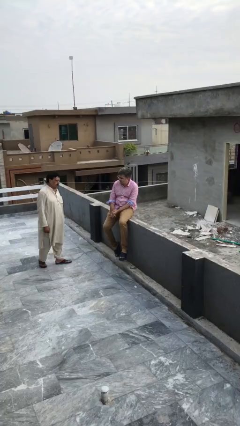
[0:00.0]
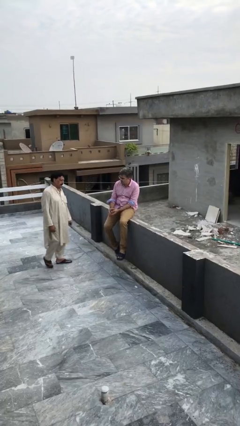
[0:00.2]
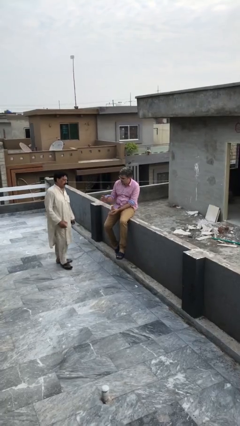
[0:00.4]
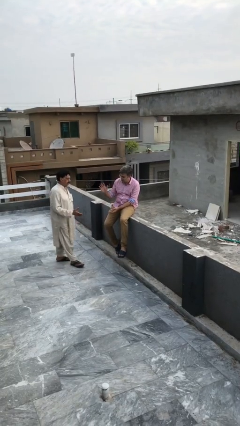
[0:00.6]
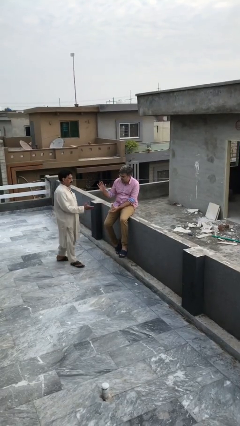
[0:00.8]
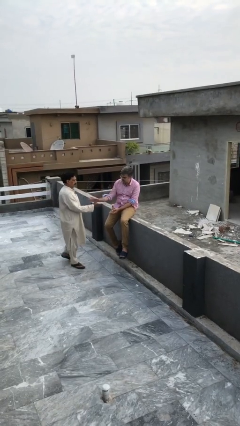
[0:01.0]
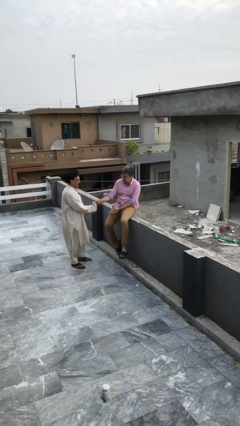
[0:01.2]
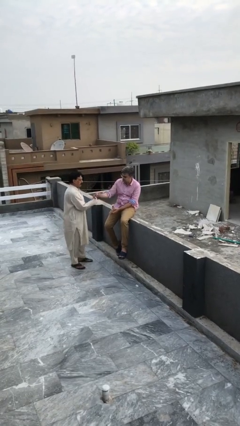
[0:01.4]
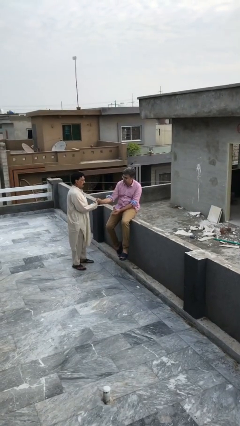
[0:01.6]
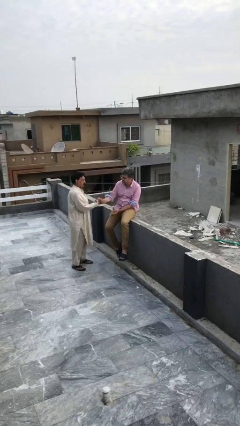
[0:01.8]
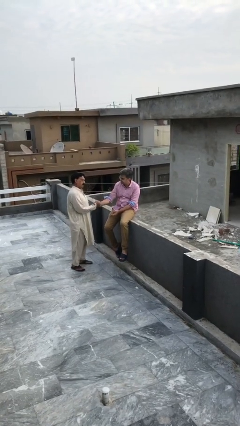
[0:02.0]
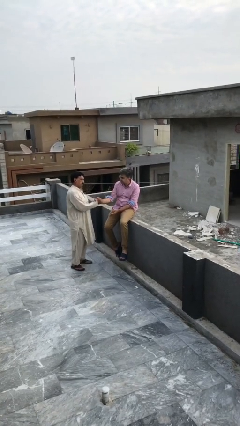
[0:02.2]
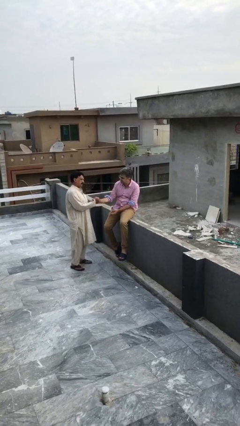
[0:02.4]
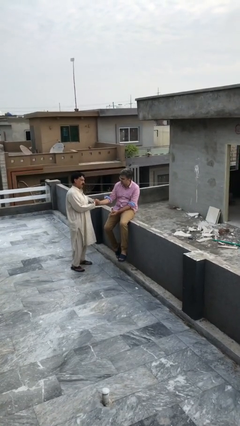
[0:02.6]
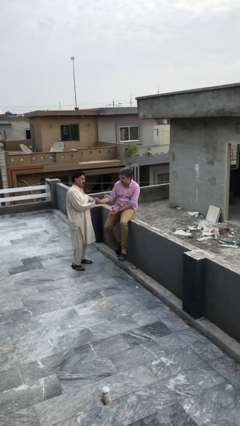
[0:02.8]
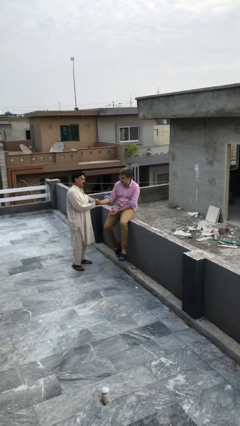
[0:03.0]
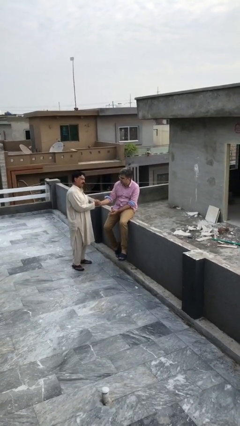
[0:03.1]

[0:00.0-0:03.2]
person shakes hand

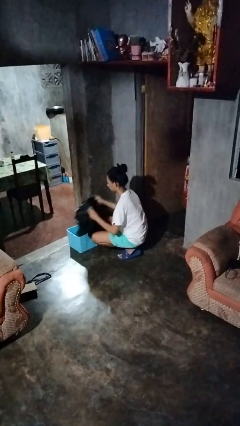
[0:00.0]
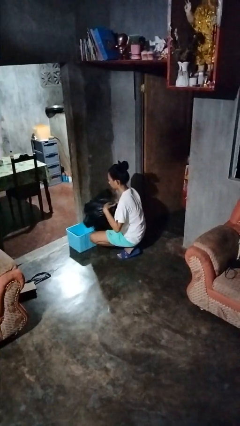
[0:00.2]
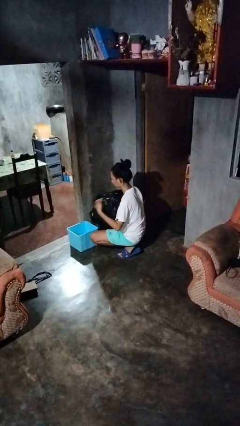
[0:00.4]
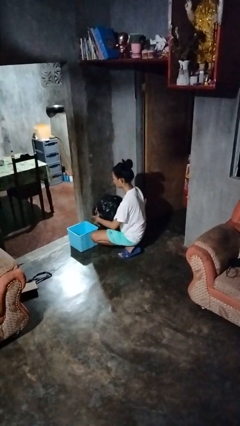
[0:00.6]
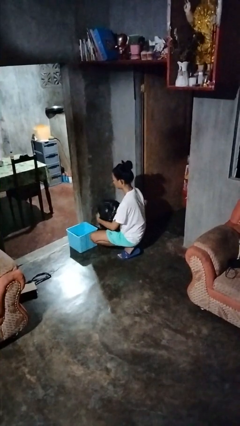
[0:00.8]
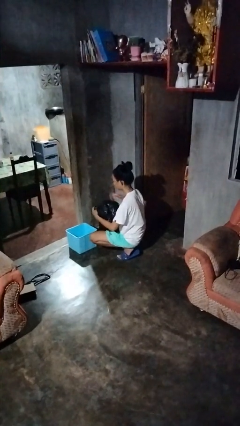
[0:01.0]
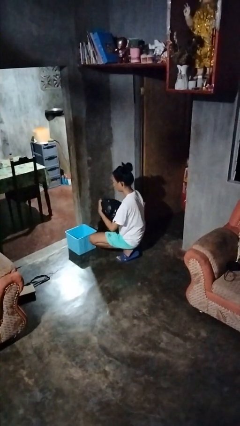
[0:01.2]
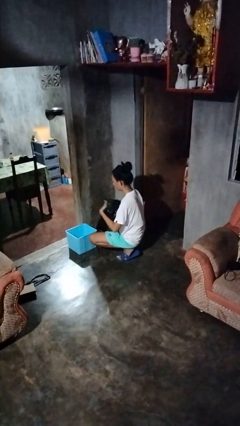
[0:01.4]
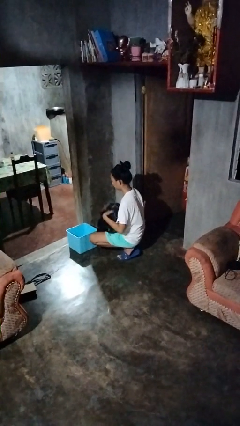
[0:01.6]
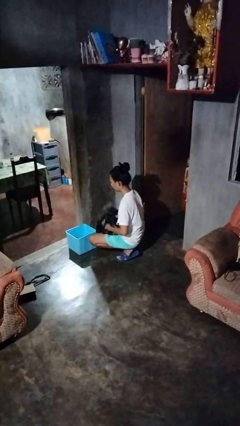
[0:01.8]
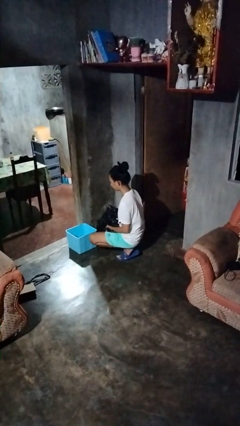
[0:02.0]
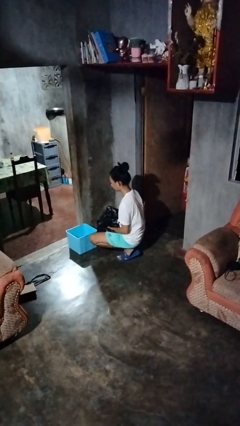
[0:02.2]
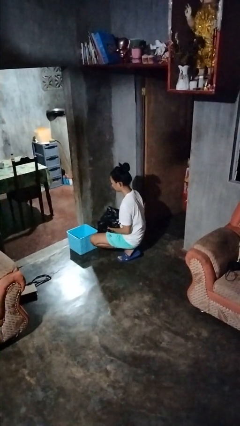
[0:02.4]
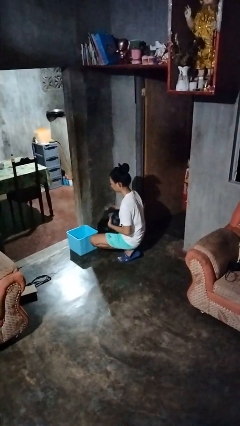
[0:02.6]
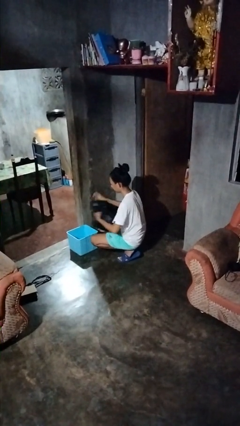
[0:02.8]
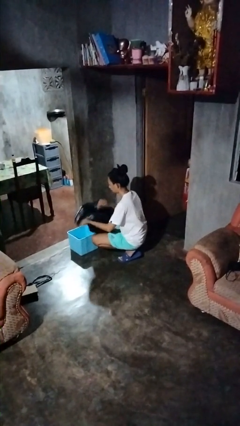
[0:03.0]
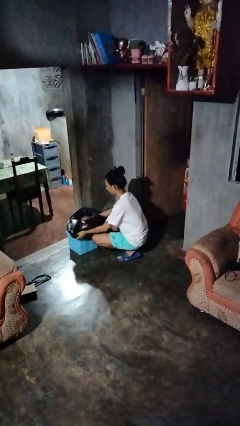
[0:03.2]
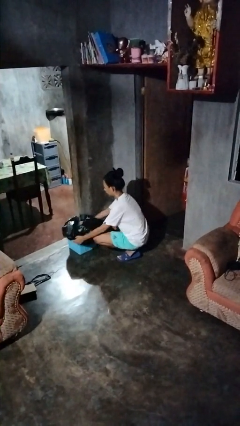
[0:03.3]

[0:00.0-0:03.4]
person removes trashbag from trashcan

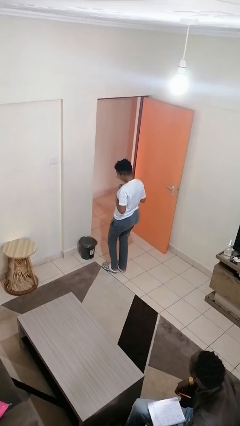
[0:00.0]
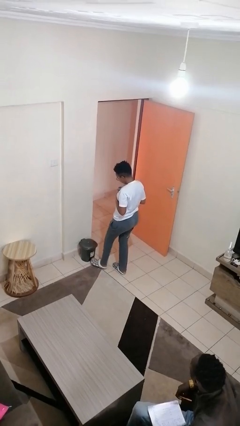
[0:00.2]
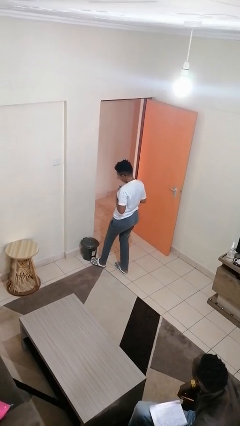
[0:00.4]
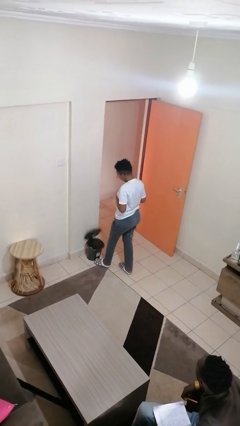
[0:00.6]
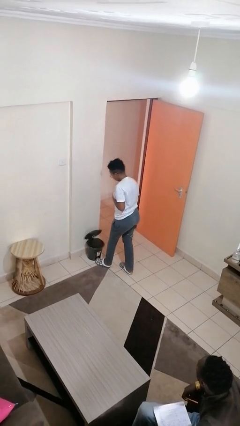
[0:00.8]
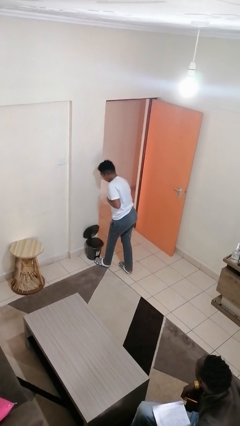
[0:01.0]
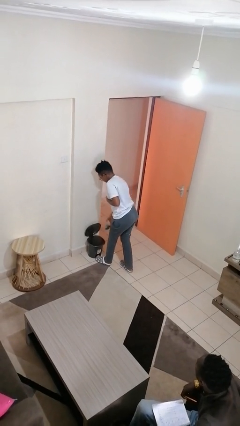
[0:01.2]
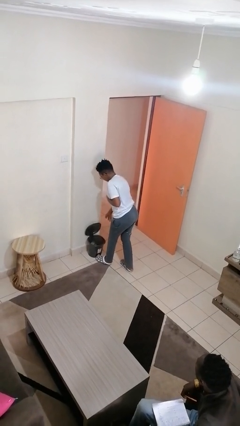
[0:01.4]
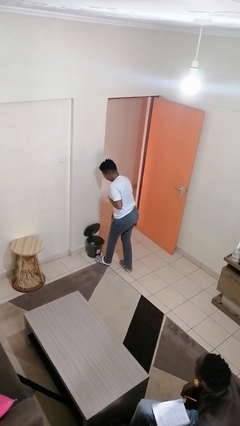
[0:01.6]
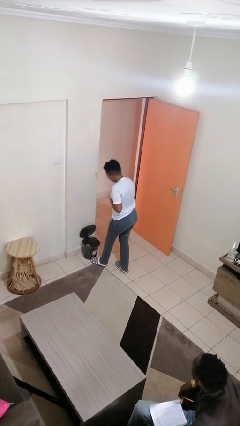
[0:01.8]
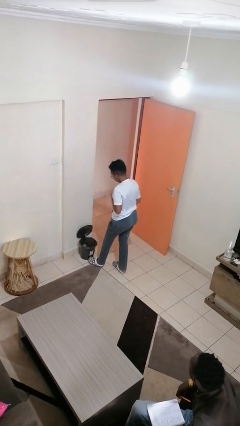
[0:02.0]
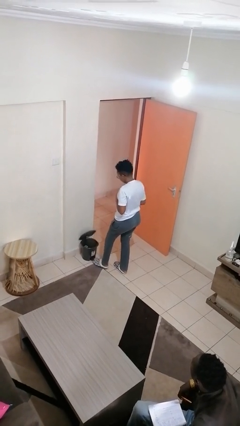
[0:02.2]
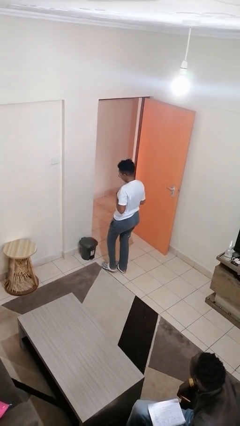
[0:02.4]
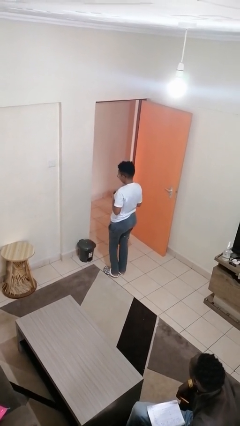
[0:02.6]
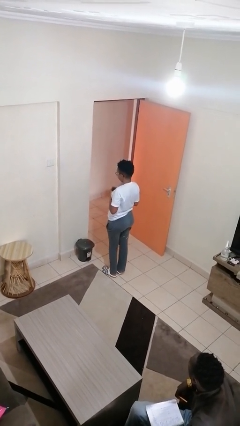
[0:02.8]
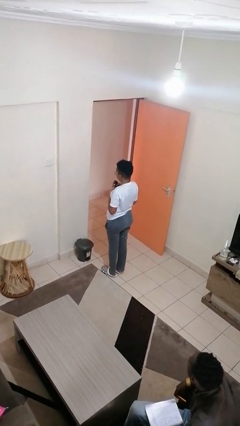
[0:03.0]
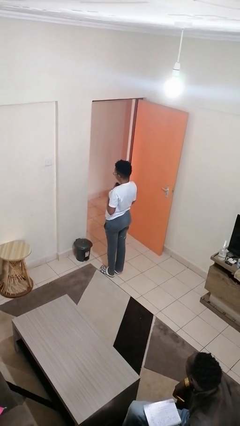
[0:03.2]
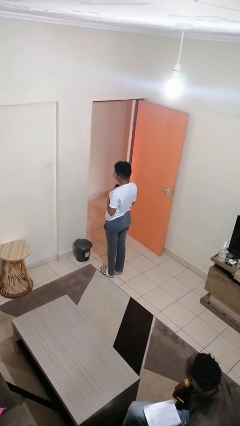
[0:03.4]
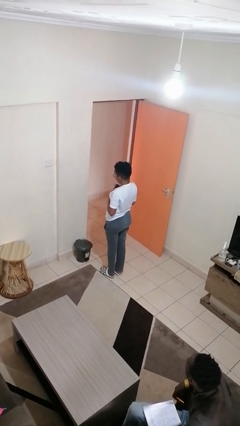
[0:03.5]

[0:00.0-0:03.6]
person discards trash

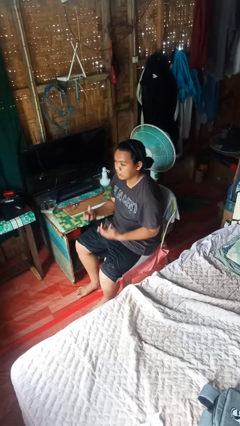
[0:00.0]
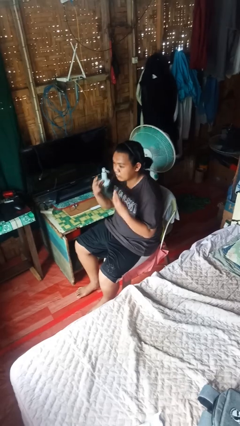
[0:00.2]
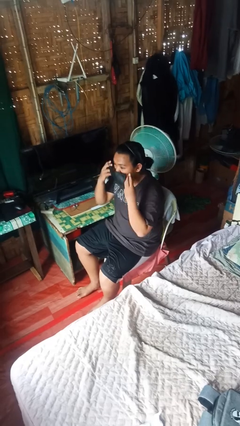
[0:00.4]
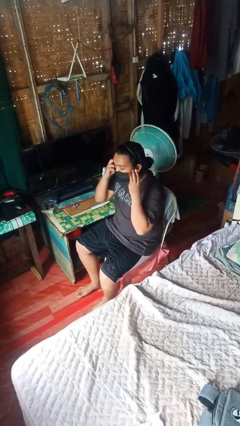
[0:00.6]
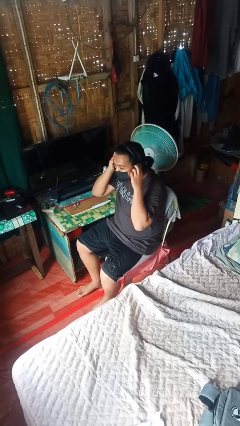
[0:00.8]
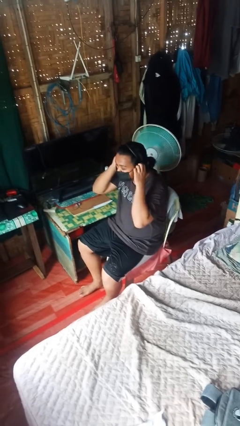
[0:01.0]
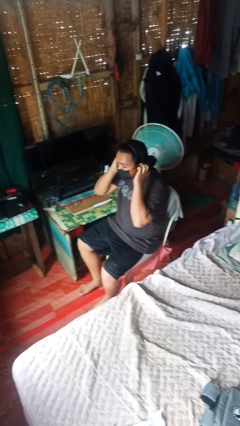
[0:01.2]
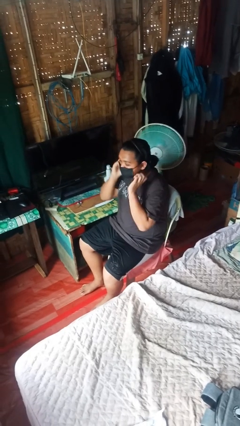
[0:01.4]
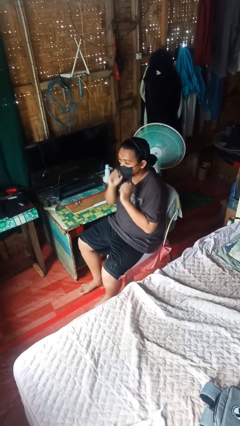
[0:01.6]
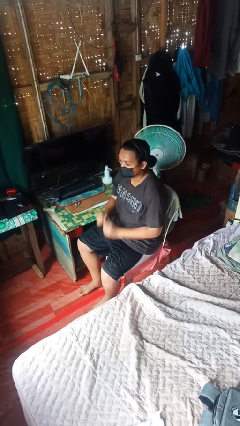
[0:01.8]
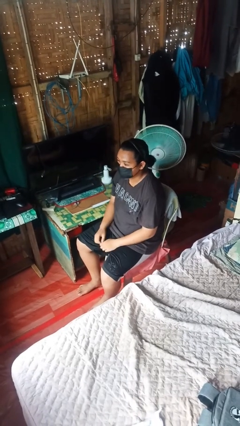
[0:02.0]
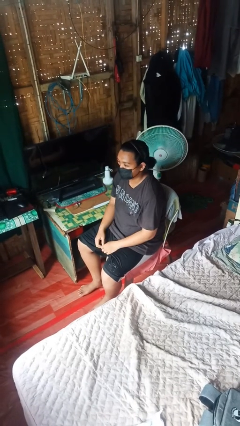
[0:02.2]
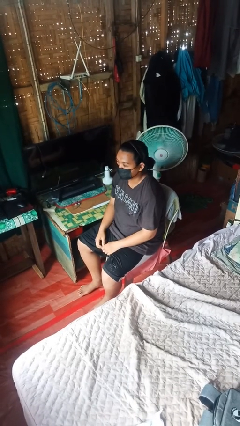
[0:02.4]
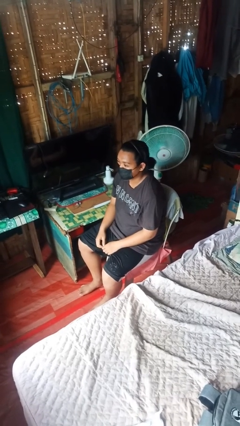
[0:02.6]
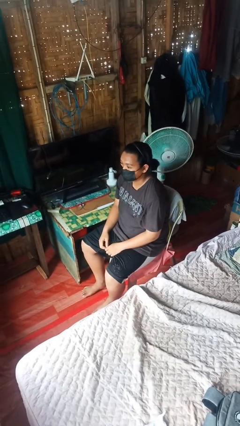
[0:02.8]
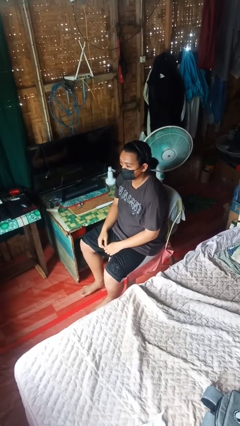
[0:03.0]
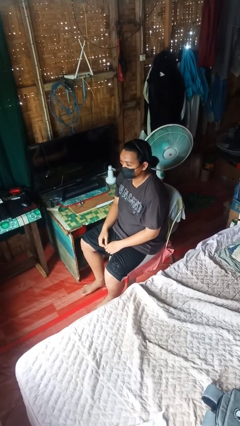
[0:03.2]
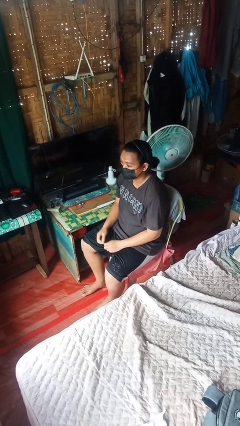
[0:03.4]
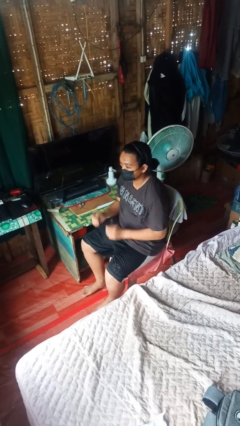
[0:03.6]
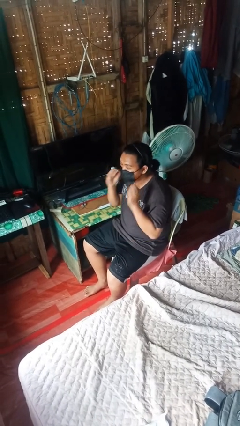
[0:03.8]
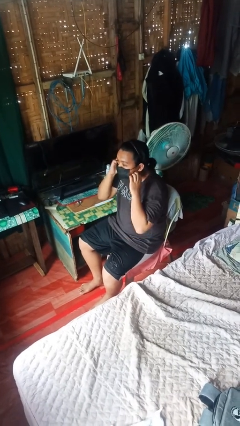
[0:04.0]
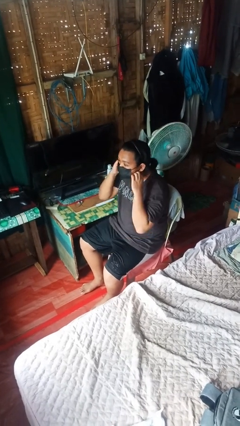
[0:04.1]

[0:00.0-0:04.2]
person puts on facemask

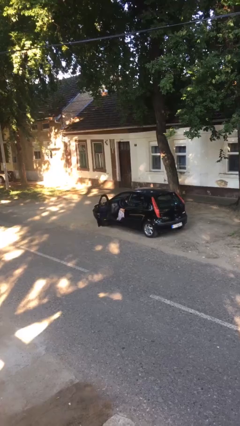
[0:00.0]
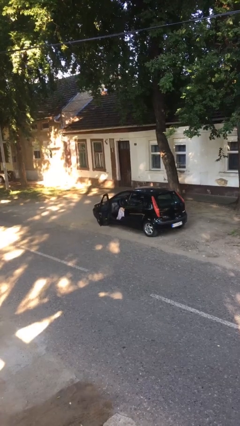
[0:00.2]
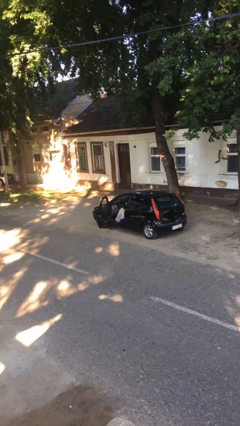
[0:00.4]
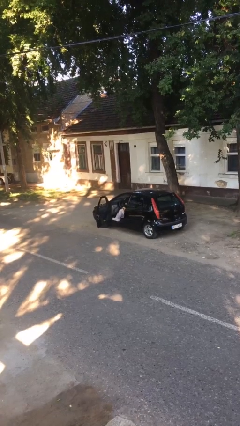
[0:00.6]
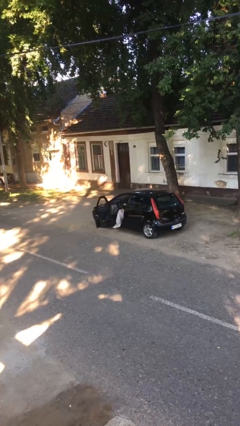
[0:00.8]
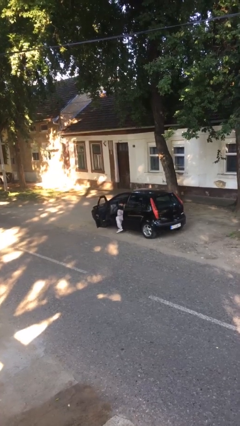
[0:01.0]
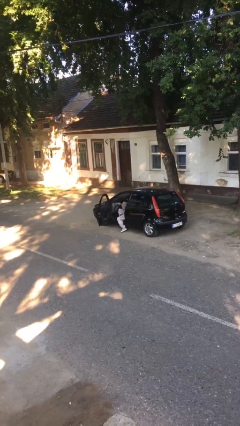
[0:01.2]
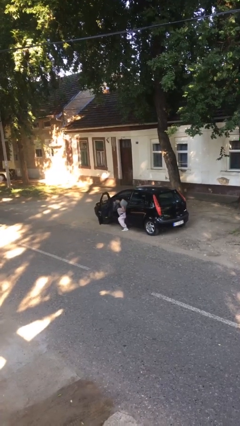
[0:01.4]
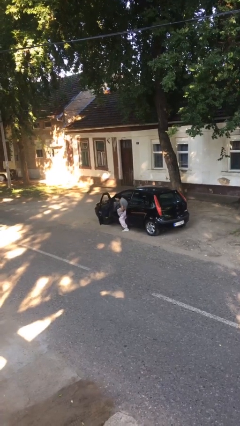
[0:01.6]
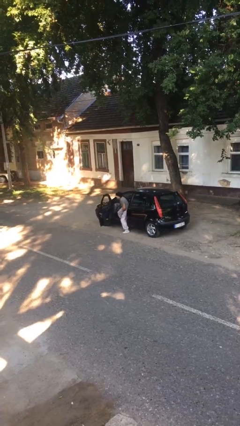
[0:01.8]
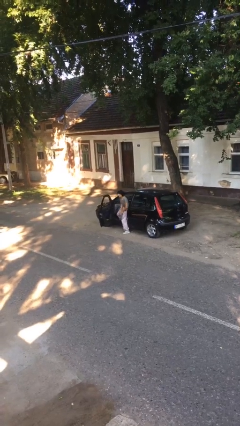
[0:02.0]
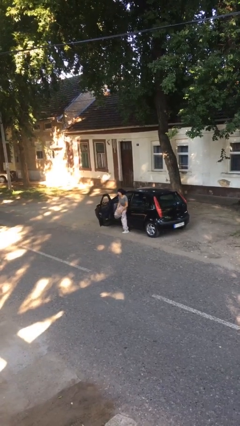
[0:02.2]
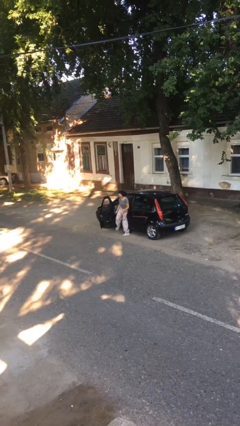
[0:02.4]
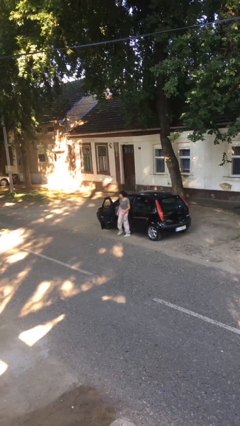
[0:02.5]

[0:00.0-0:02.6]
person exits car

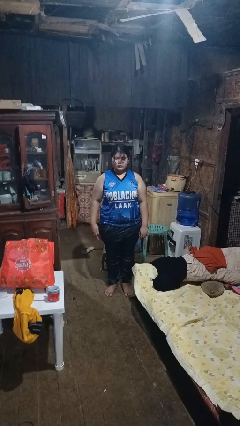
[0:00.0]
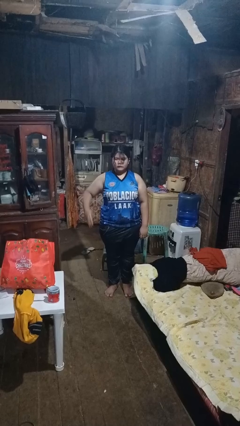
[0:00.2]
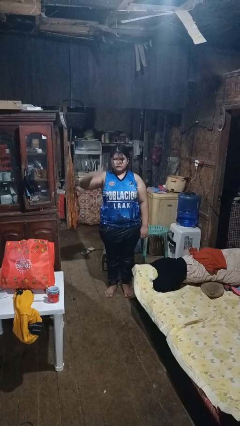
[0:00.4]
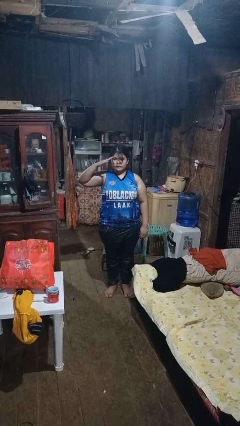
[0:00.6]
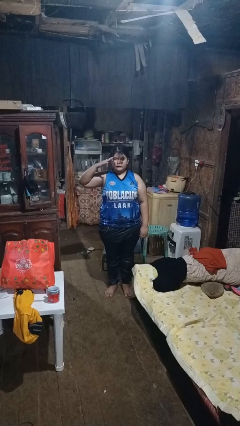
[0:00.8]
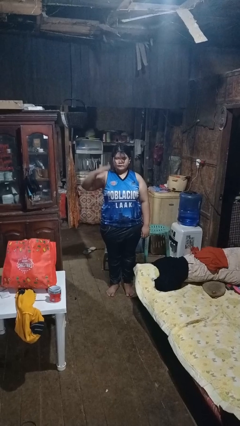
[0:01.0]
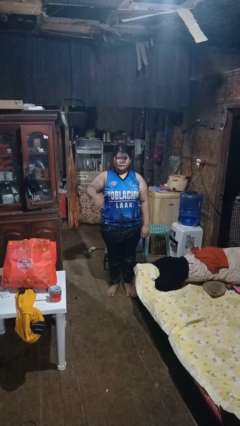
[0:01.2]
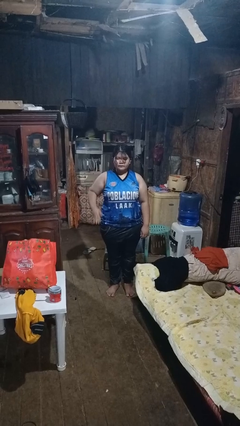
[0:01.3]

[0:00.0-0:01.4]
person salutes
